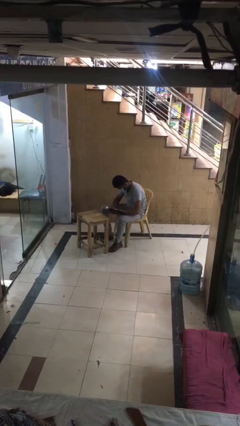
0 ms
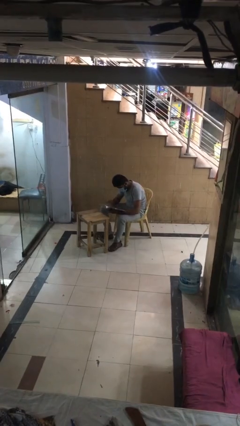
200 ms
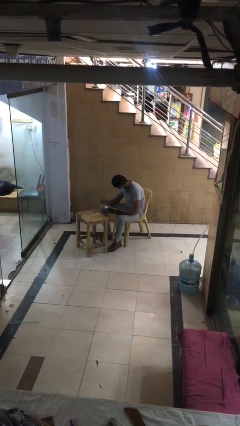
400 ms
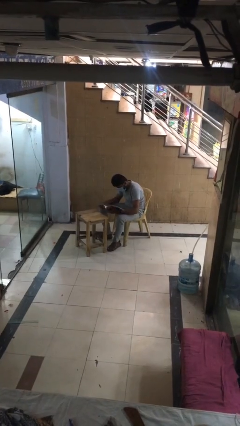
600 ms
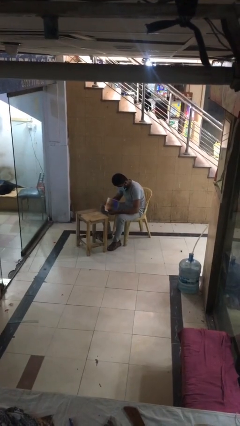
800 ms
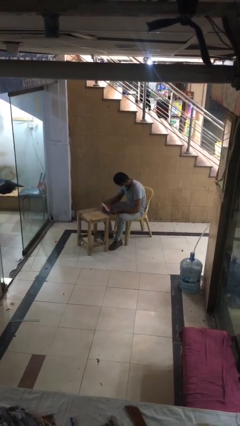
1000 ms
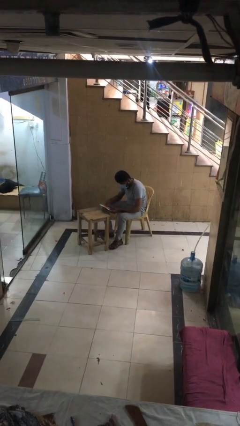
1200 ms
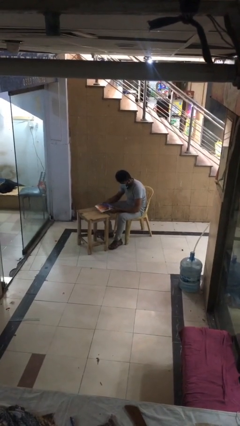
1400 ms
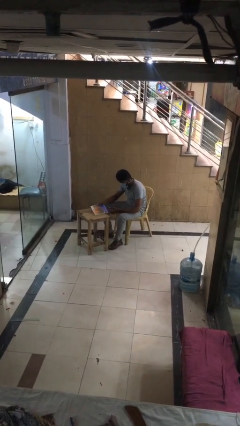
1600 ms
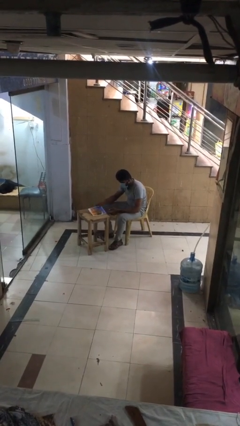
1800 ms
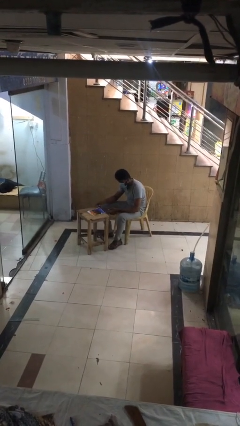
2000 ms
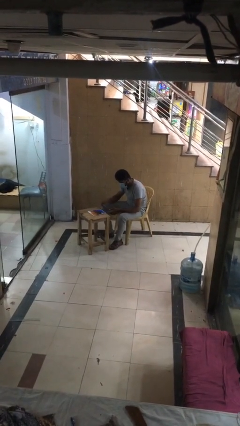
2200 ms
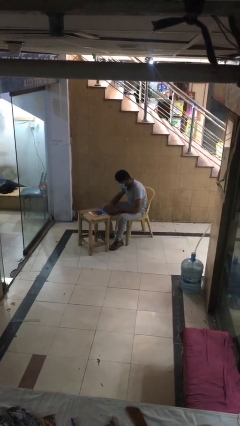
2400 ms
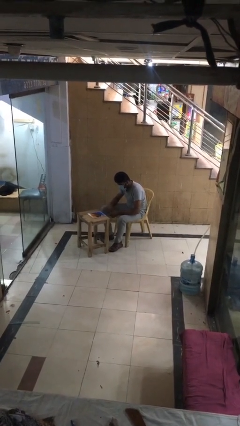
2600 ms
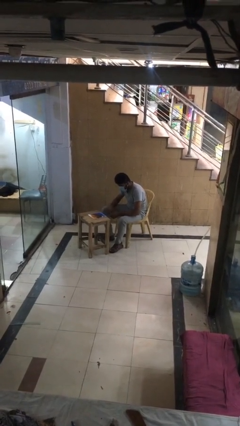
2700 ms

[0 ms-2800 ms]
person puts down object on table

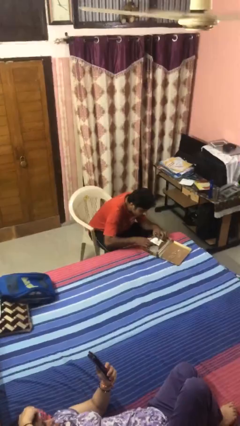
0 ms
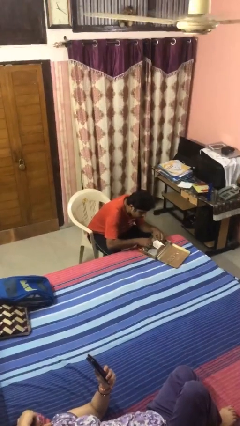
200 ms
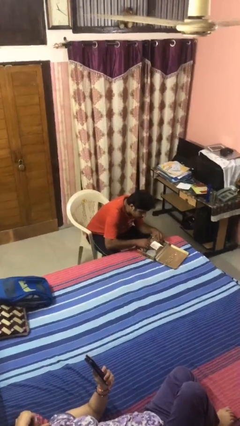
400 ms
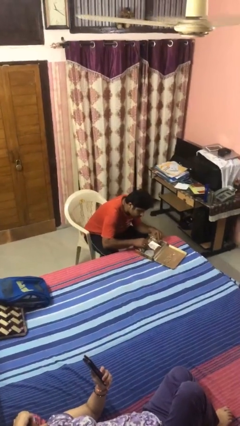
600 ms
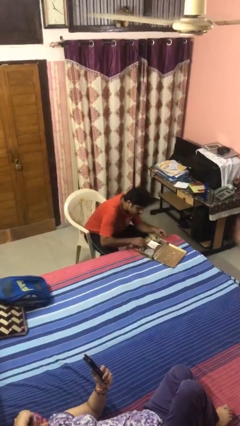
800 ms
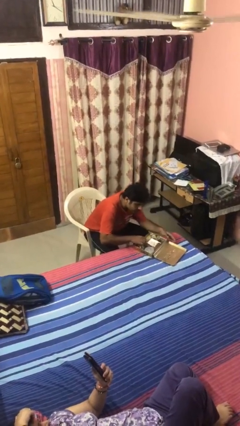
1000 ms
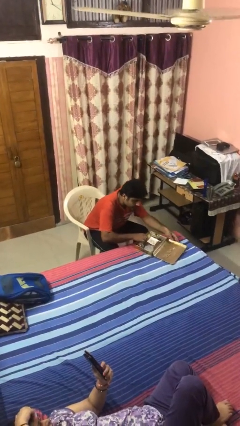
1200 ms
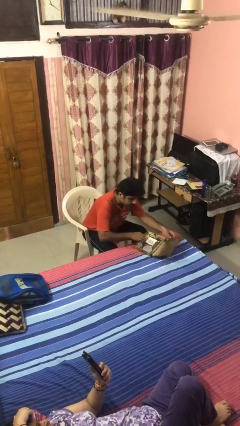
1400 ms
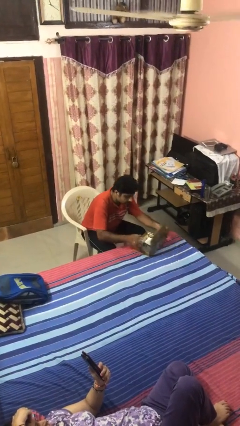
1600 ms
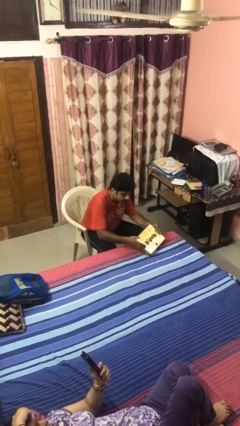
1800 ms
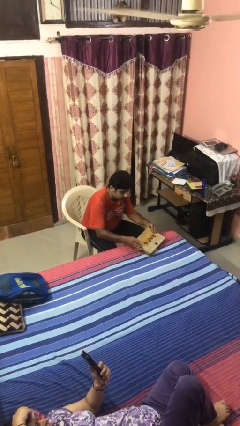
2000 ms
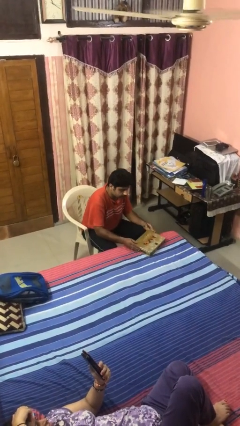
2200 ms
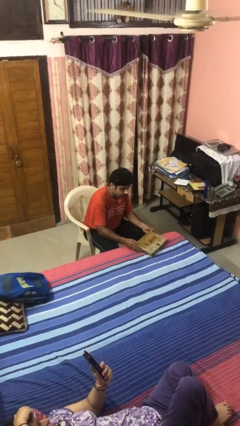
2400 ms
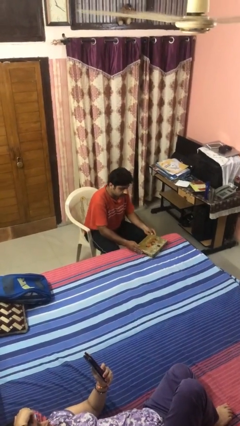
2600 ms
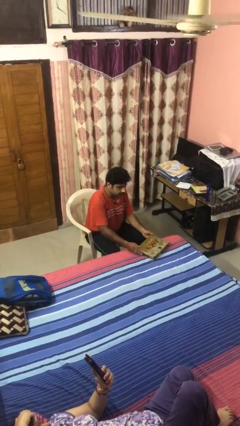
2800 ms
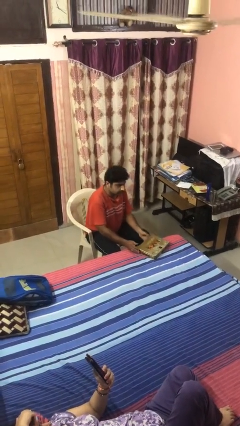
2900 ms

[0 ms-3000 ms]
person closes jewelry box

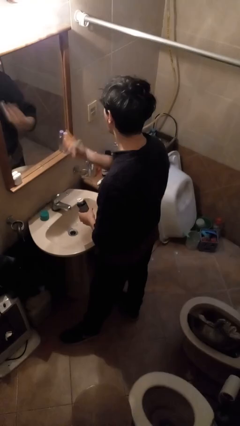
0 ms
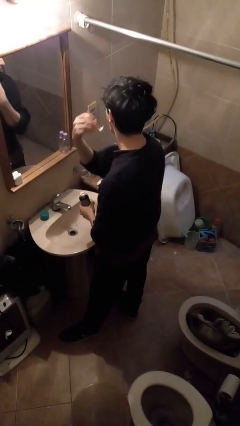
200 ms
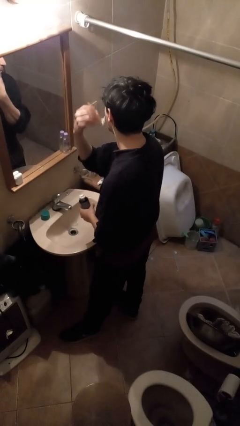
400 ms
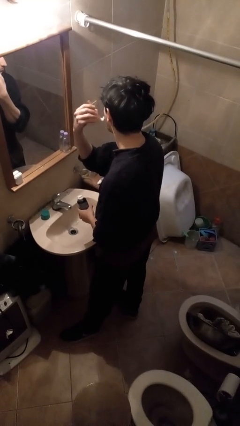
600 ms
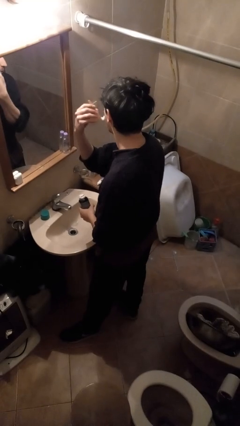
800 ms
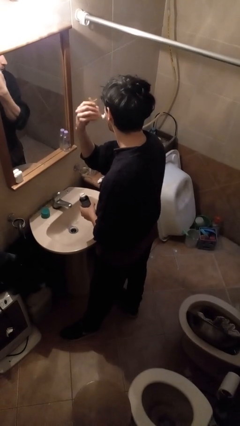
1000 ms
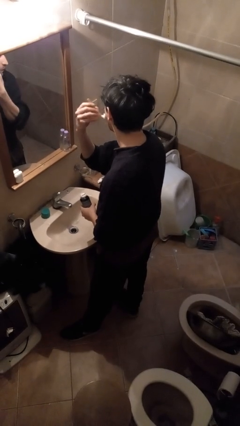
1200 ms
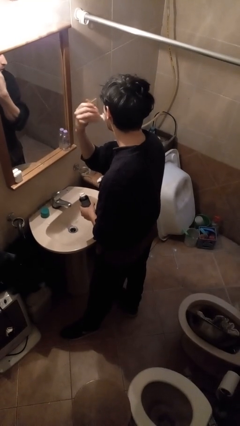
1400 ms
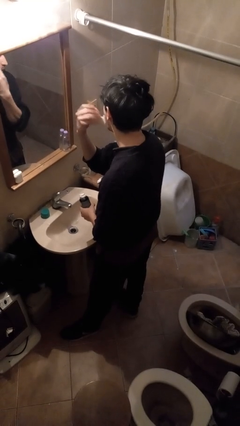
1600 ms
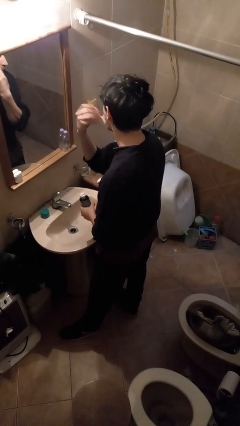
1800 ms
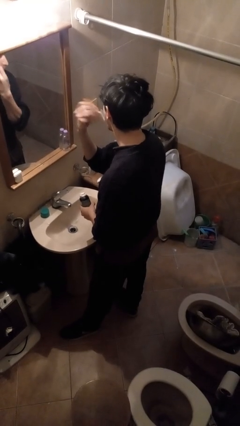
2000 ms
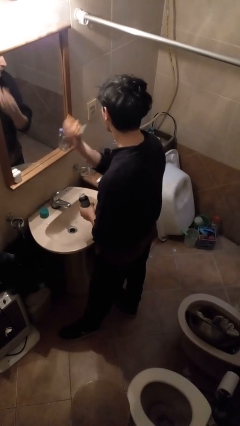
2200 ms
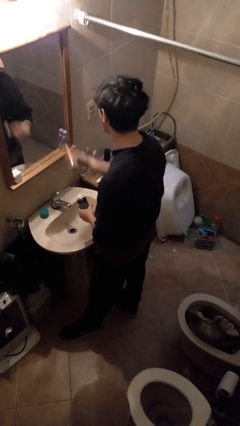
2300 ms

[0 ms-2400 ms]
person shaves face

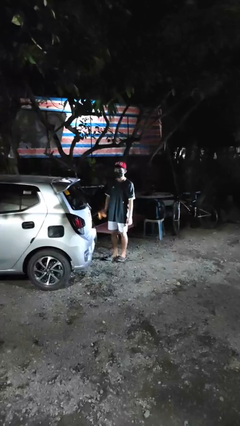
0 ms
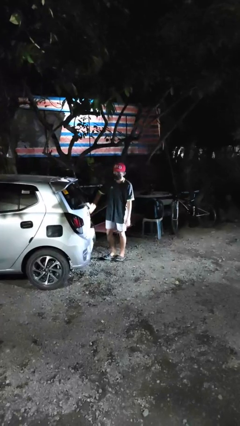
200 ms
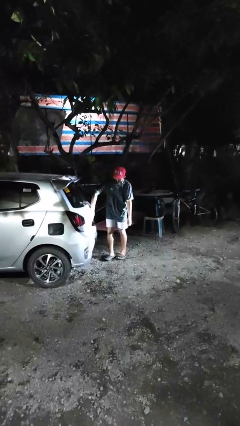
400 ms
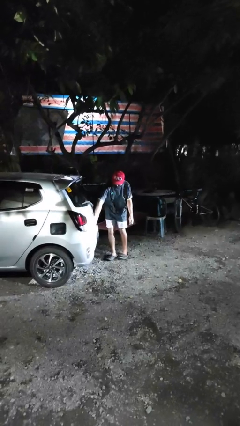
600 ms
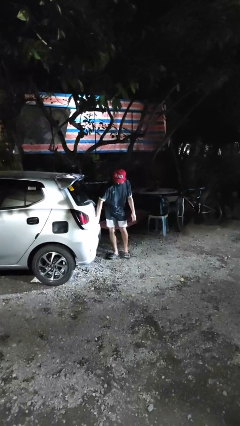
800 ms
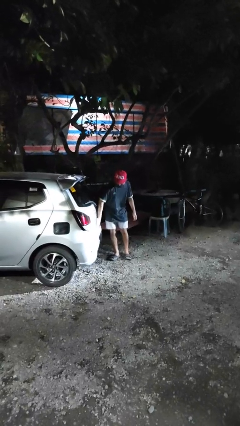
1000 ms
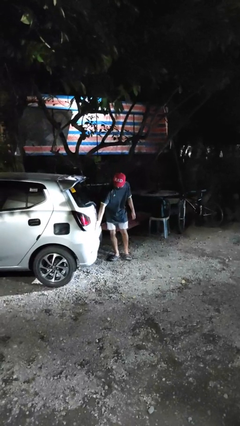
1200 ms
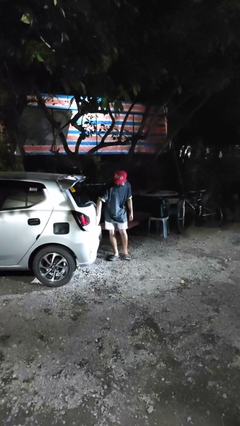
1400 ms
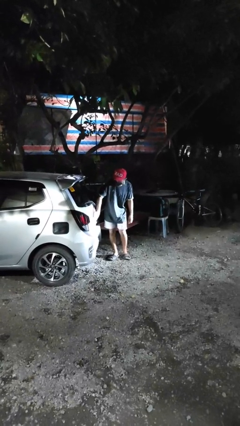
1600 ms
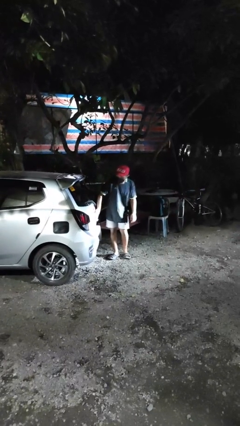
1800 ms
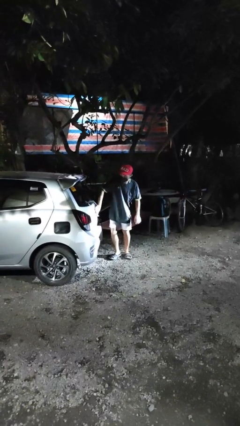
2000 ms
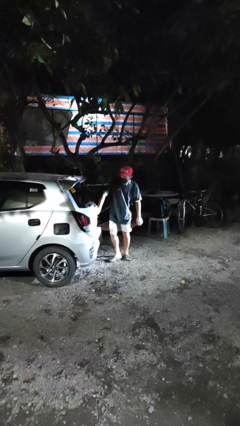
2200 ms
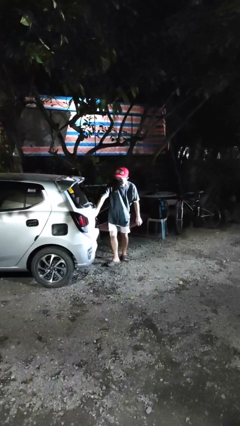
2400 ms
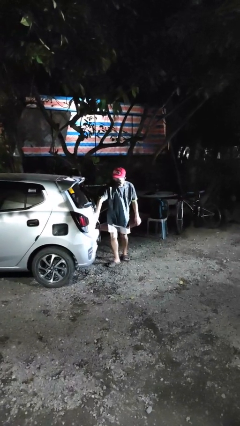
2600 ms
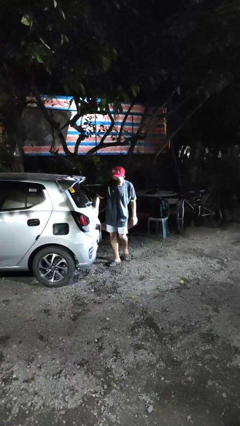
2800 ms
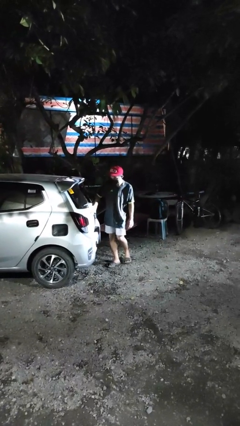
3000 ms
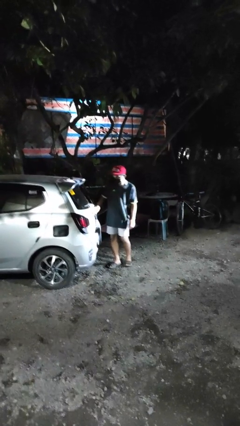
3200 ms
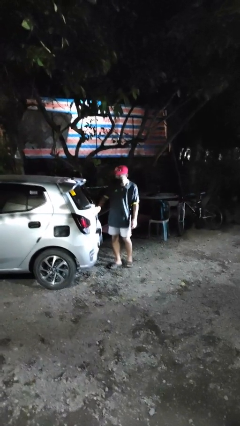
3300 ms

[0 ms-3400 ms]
person polishes car with rag

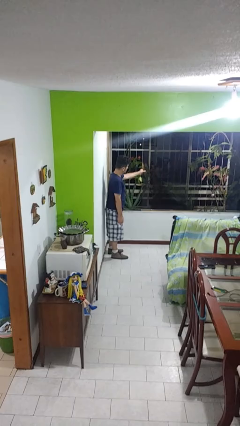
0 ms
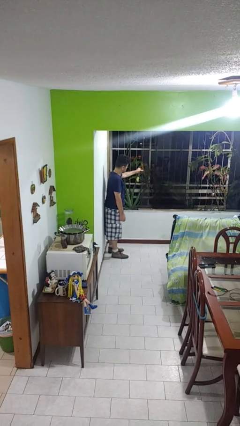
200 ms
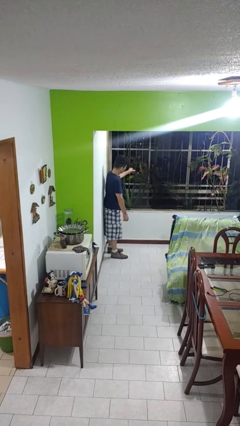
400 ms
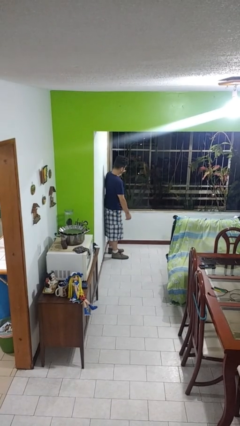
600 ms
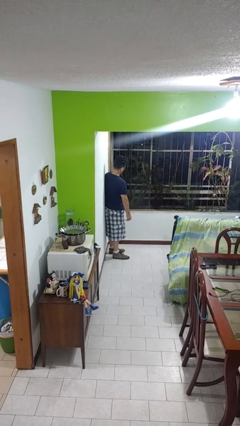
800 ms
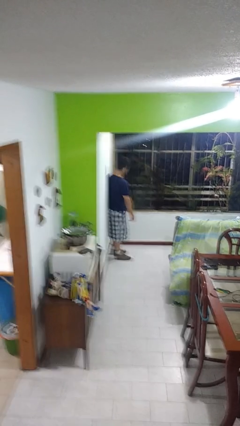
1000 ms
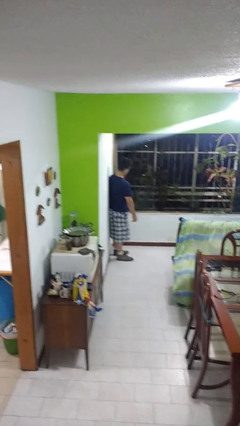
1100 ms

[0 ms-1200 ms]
person closes home window

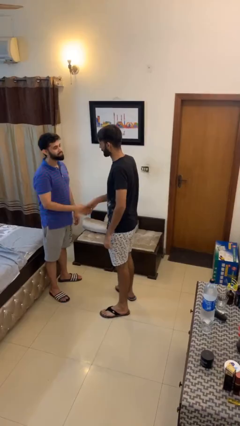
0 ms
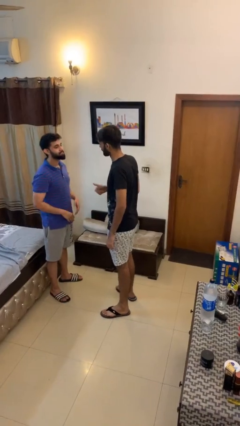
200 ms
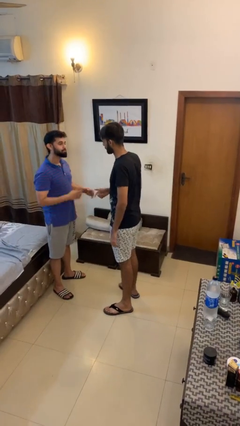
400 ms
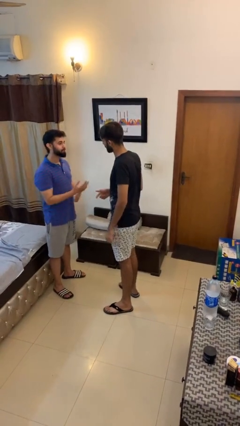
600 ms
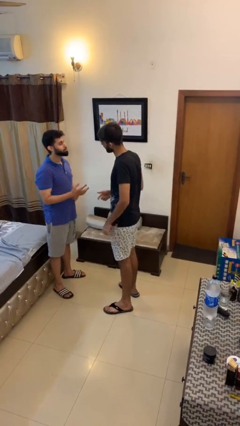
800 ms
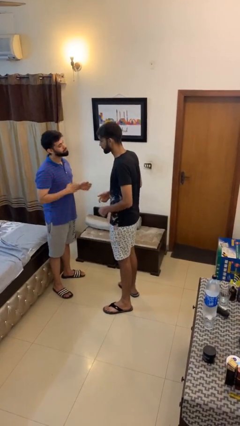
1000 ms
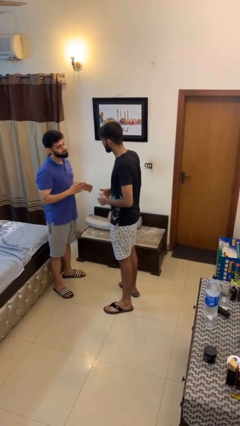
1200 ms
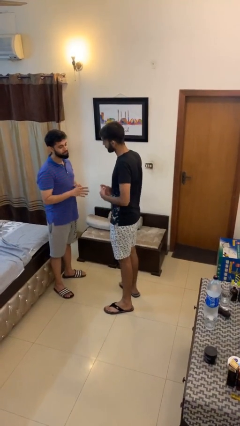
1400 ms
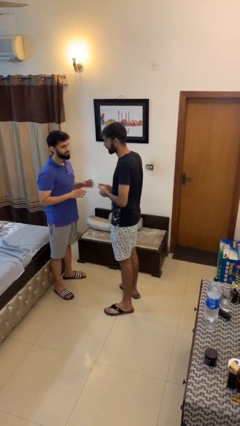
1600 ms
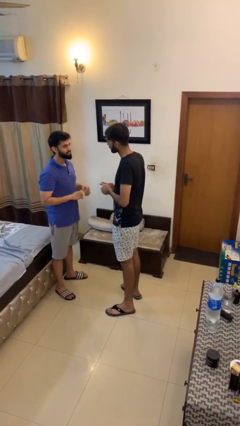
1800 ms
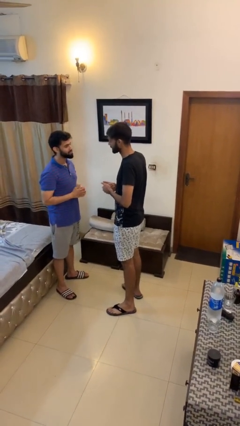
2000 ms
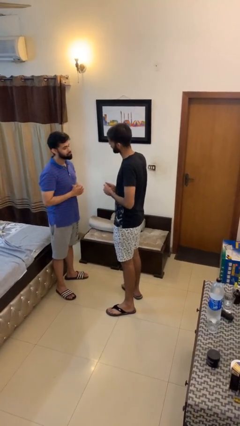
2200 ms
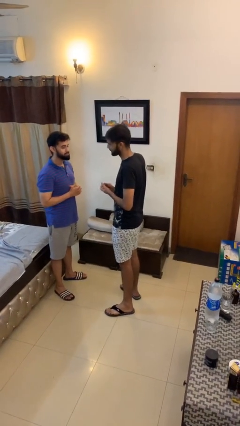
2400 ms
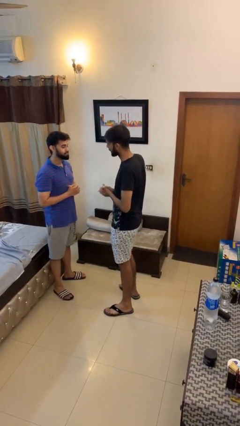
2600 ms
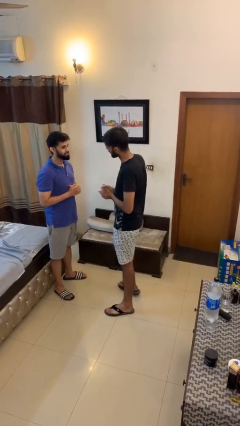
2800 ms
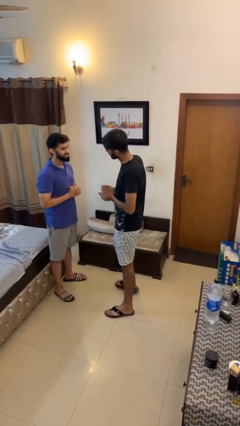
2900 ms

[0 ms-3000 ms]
person talks to person

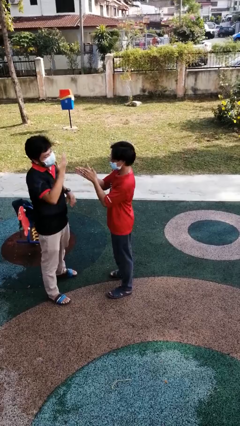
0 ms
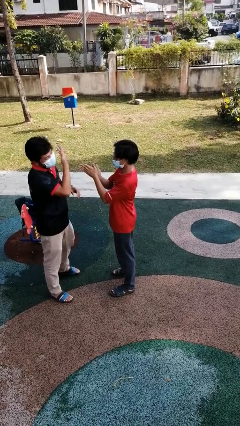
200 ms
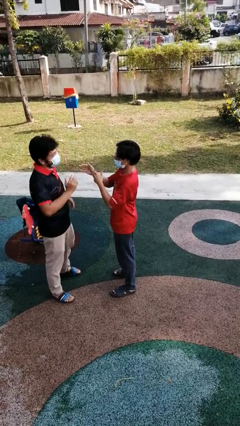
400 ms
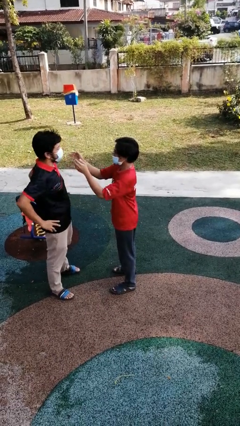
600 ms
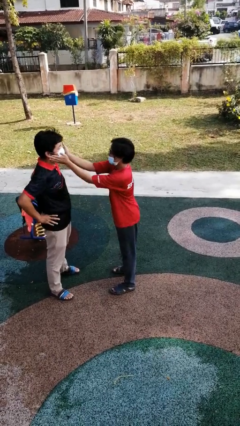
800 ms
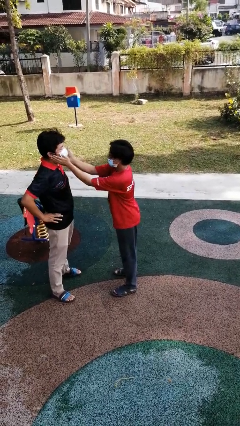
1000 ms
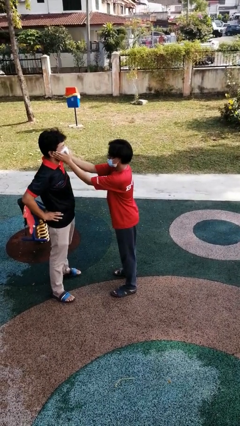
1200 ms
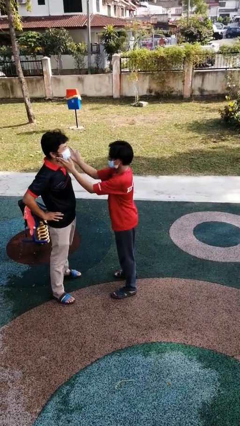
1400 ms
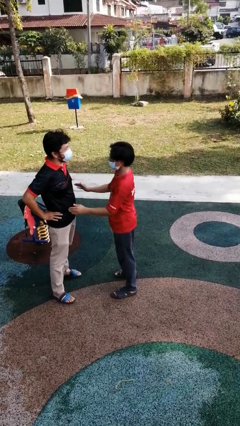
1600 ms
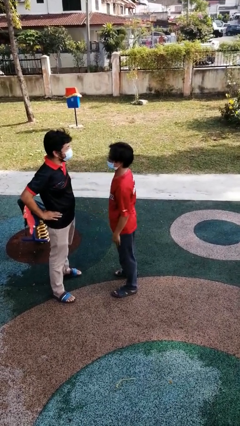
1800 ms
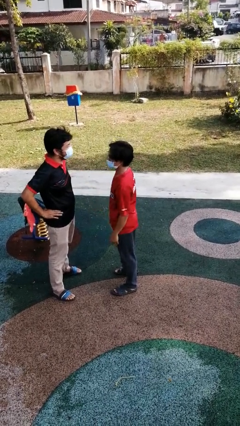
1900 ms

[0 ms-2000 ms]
person touches face of person
